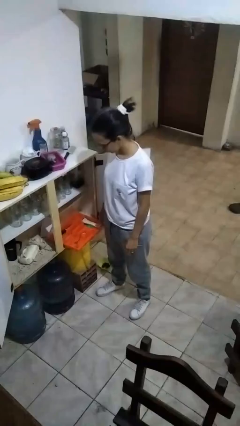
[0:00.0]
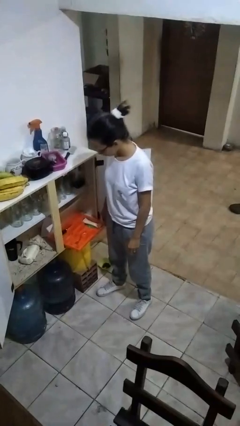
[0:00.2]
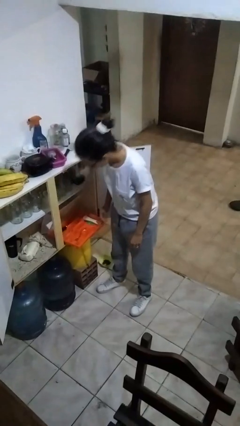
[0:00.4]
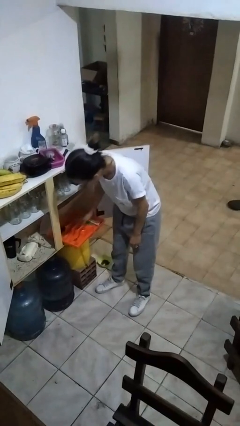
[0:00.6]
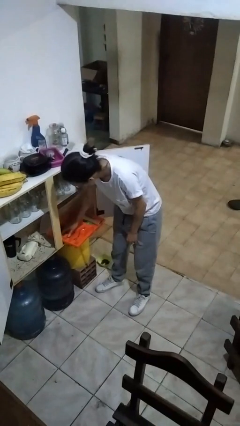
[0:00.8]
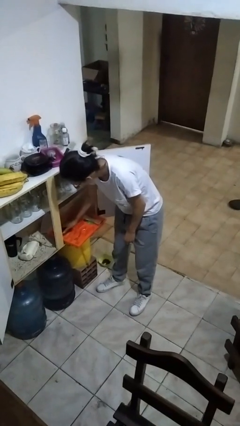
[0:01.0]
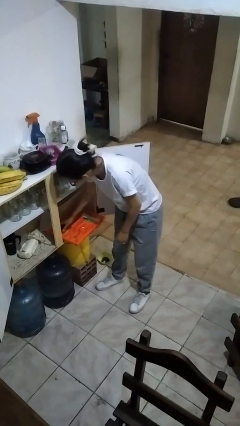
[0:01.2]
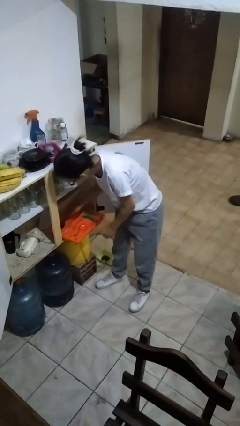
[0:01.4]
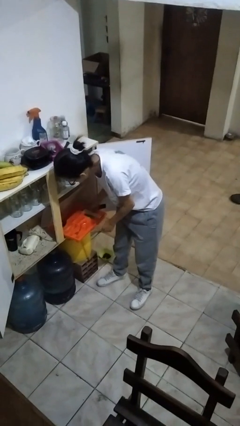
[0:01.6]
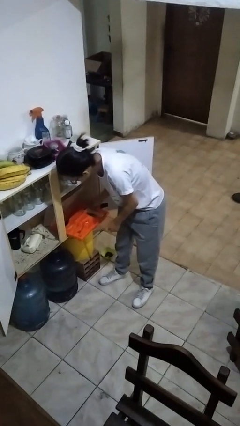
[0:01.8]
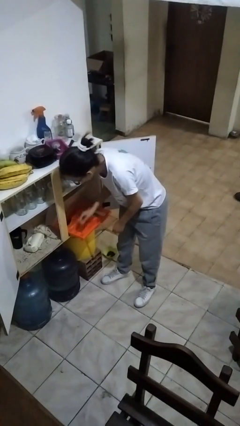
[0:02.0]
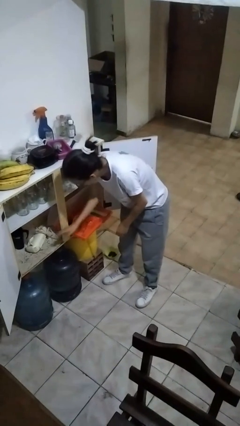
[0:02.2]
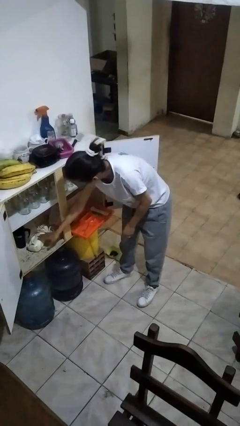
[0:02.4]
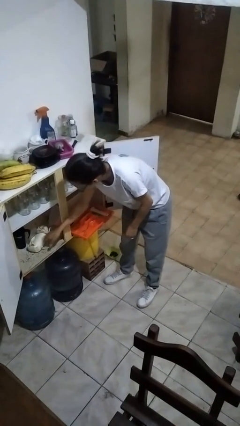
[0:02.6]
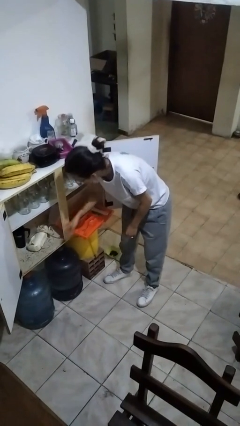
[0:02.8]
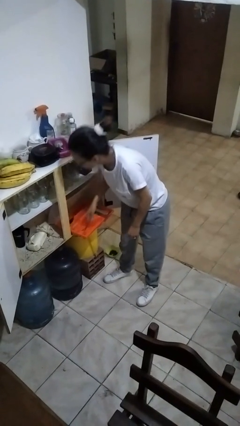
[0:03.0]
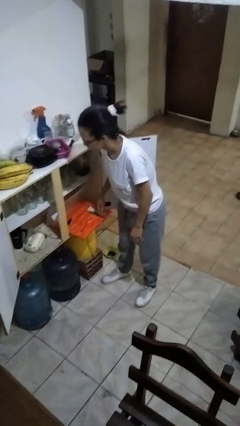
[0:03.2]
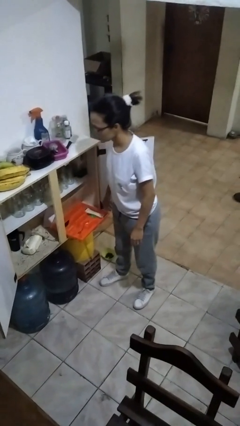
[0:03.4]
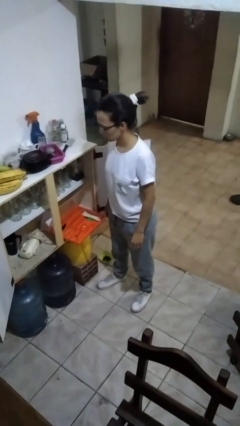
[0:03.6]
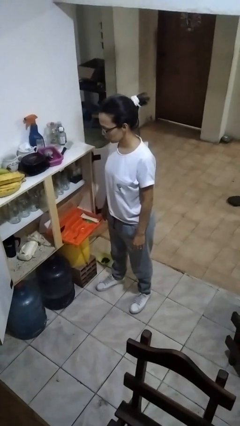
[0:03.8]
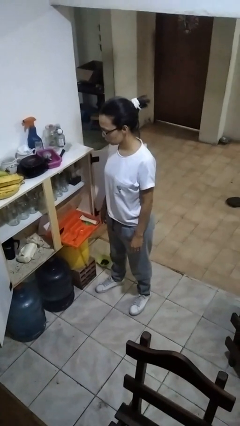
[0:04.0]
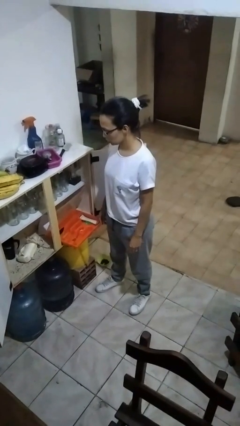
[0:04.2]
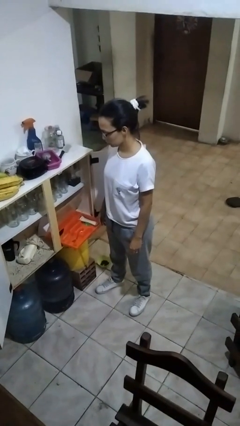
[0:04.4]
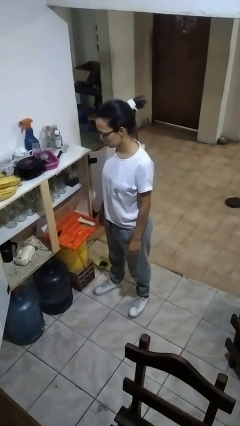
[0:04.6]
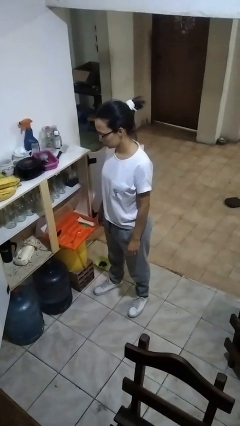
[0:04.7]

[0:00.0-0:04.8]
person searches in kitchen drawer

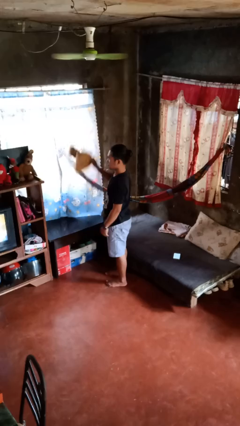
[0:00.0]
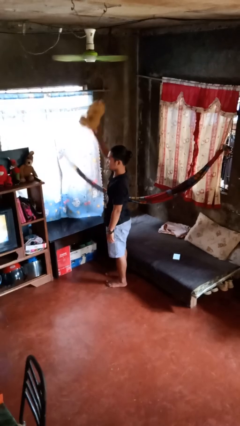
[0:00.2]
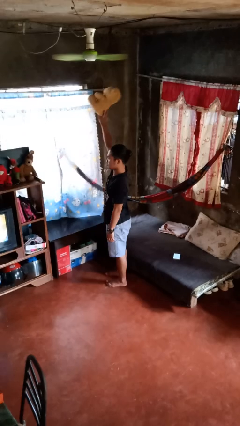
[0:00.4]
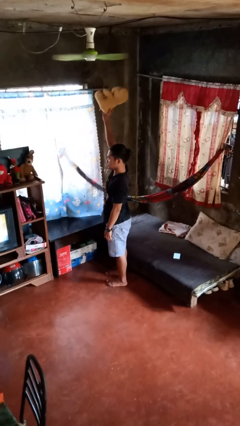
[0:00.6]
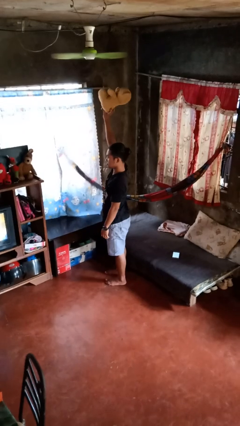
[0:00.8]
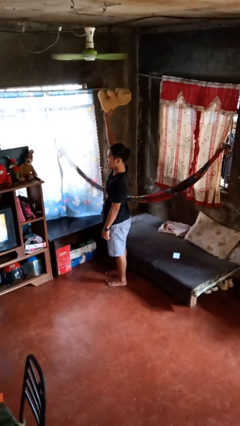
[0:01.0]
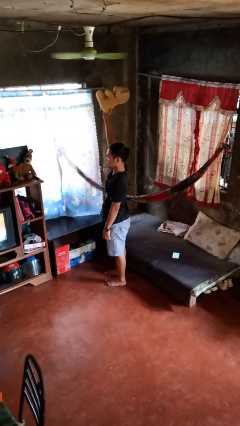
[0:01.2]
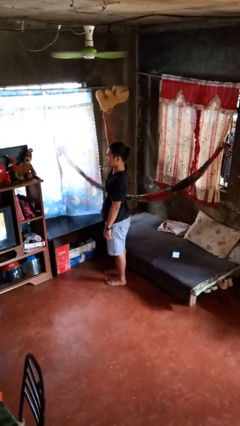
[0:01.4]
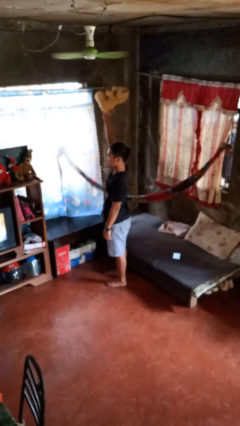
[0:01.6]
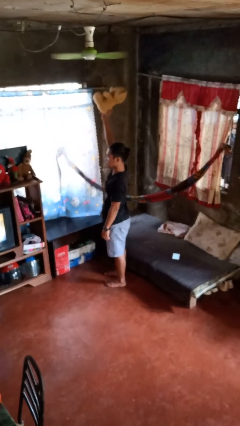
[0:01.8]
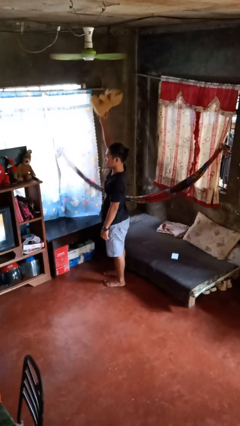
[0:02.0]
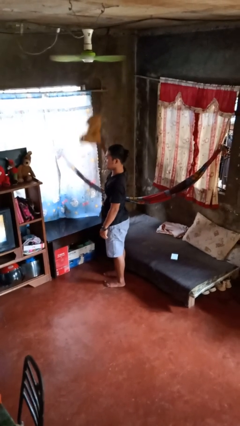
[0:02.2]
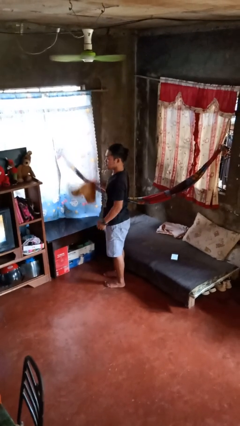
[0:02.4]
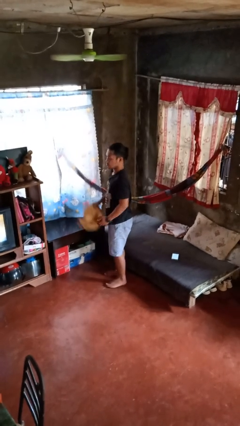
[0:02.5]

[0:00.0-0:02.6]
person holds object above head

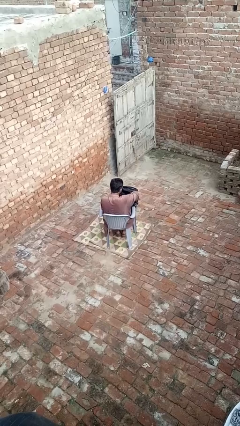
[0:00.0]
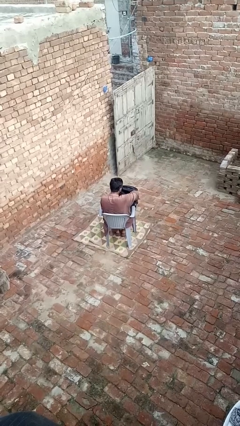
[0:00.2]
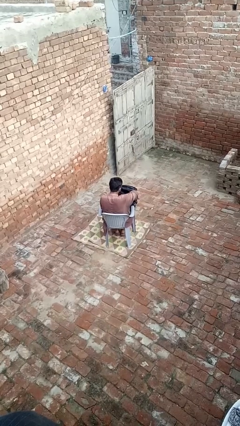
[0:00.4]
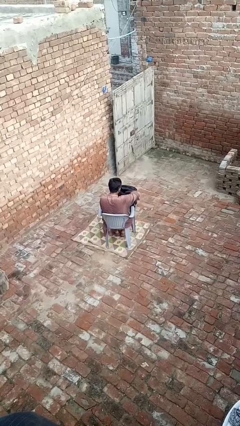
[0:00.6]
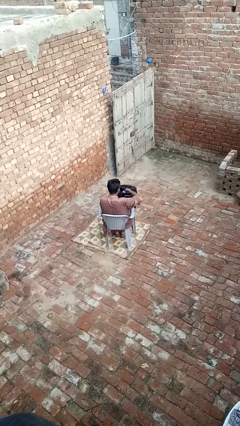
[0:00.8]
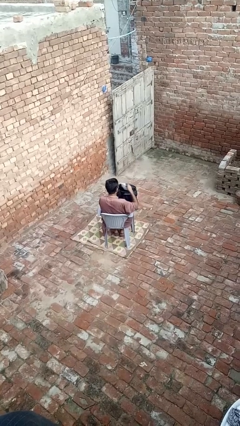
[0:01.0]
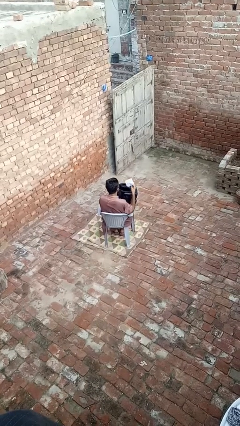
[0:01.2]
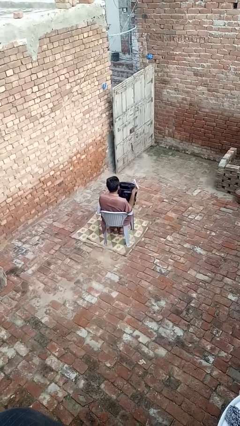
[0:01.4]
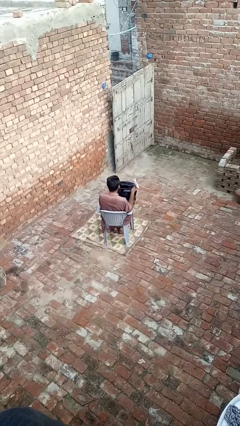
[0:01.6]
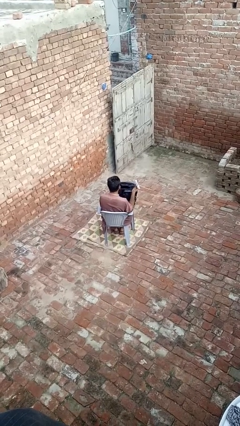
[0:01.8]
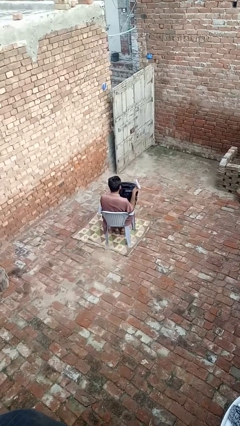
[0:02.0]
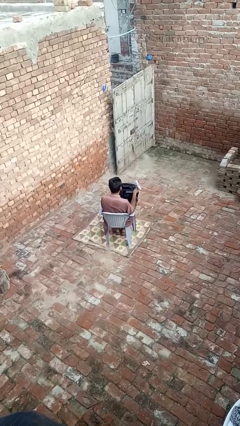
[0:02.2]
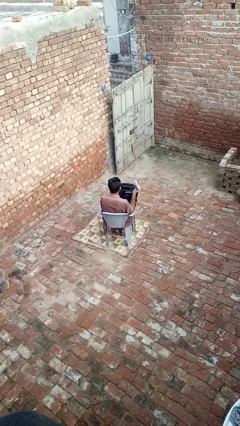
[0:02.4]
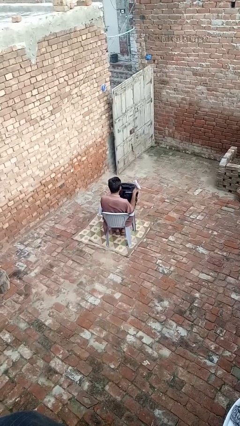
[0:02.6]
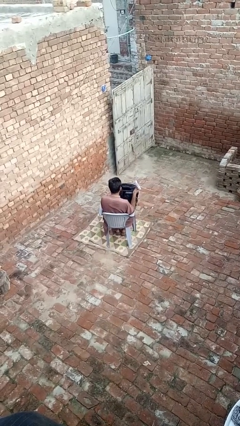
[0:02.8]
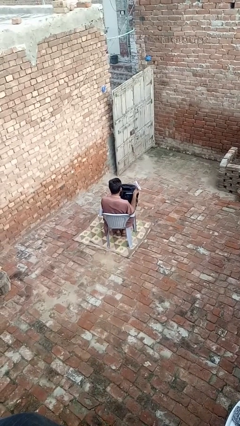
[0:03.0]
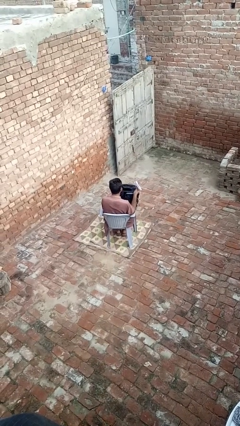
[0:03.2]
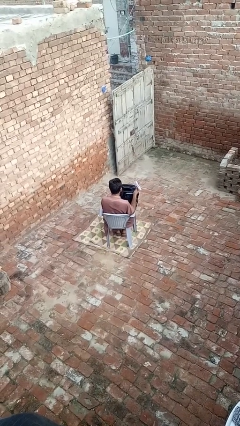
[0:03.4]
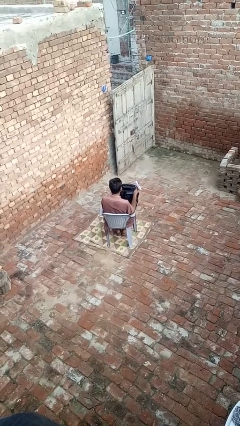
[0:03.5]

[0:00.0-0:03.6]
person takes object from backpack

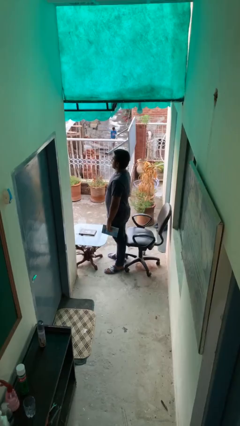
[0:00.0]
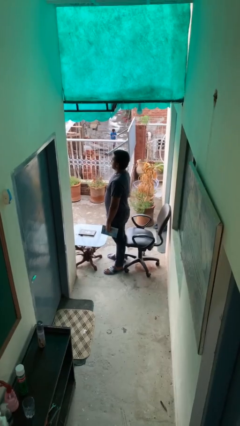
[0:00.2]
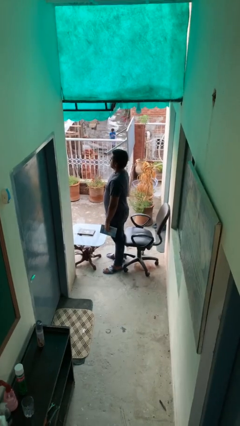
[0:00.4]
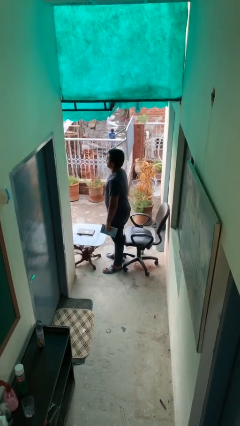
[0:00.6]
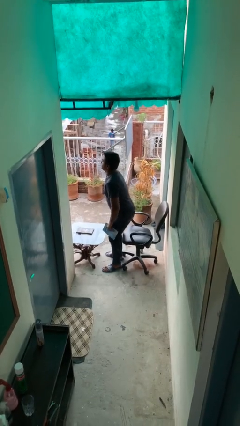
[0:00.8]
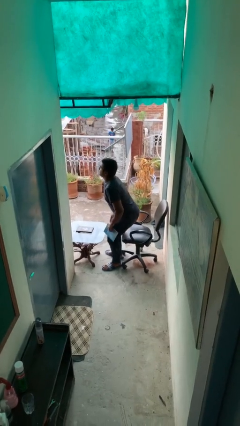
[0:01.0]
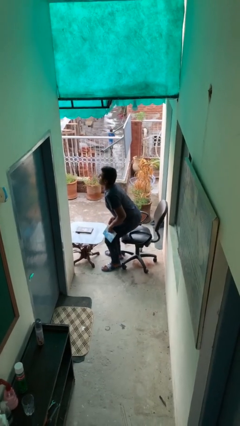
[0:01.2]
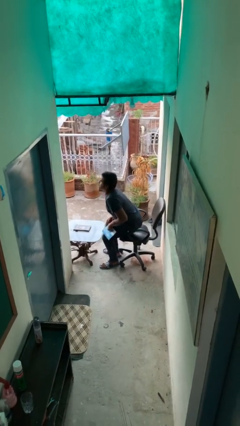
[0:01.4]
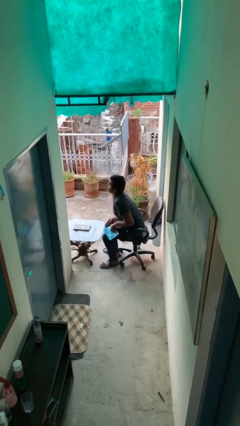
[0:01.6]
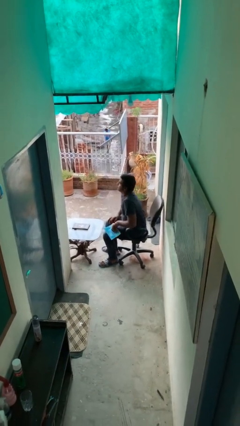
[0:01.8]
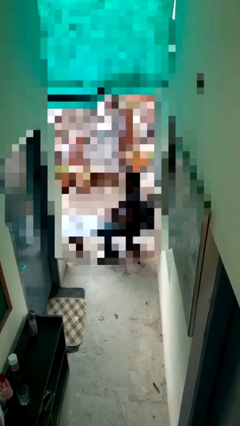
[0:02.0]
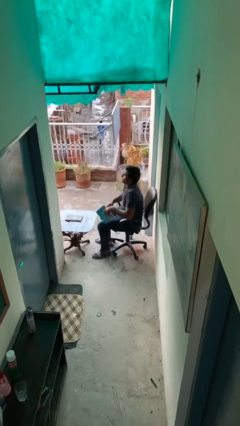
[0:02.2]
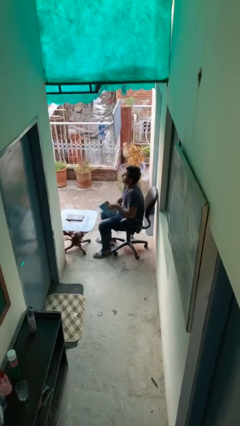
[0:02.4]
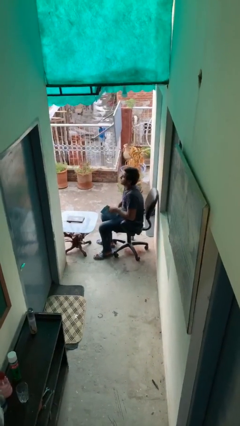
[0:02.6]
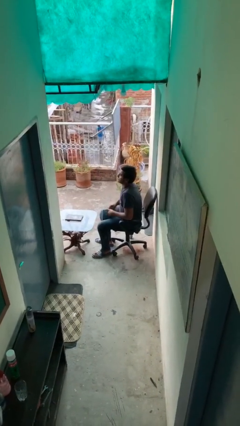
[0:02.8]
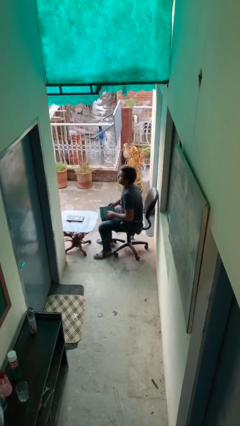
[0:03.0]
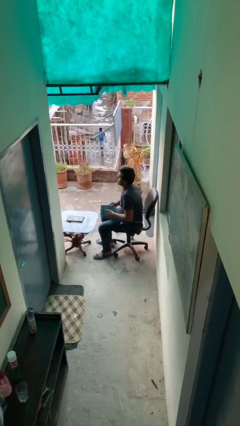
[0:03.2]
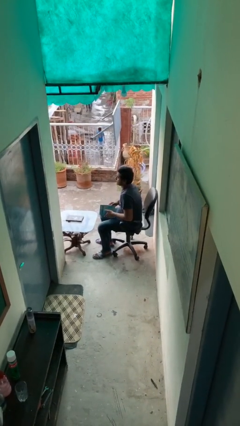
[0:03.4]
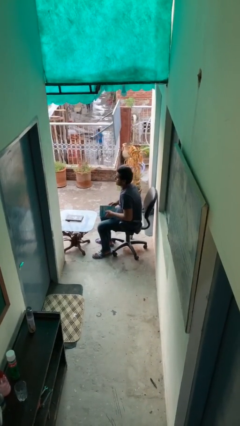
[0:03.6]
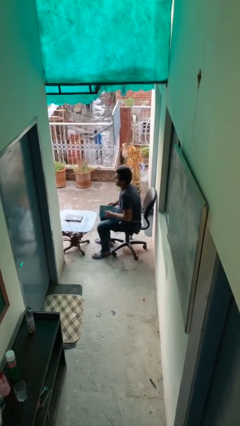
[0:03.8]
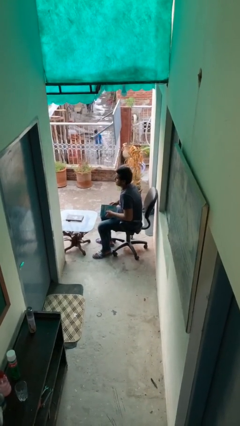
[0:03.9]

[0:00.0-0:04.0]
person sits down

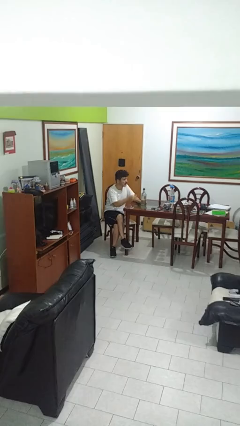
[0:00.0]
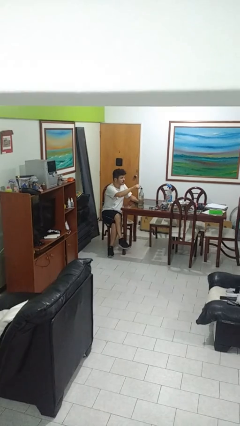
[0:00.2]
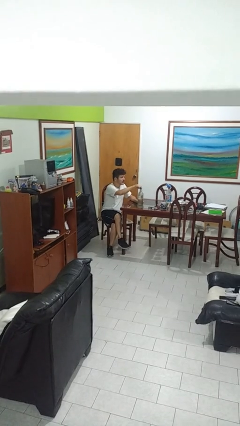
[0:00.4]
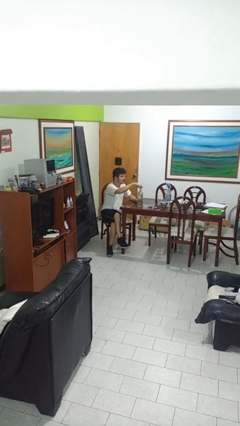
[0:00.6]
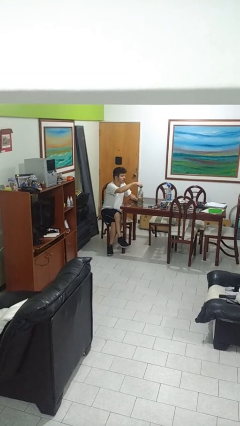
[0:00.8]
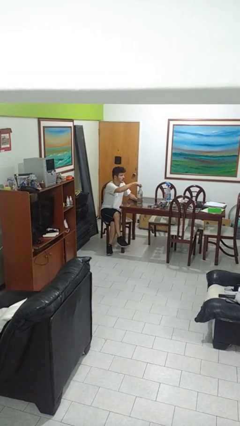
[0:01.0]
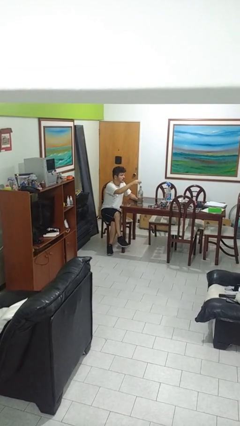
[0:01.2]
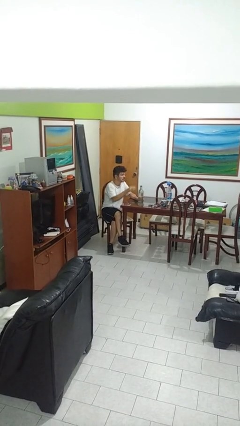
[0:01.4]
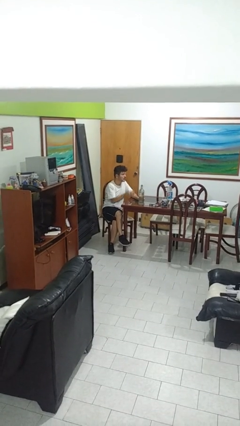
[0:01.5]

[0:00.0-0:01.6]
person unscrews lid from bottle

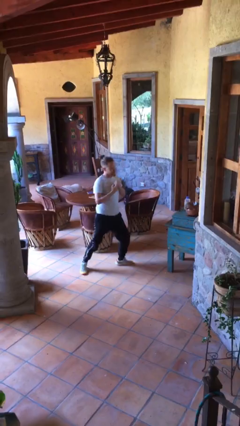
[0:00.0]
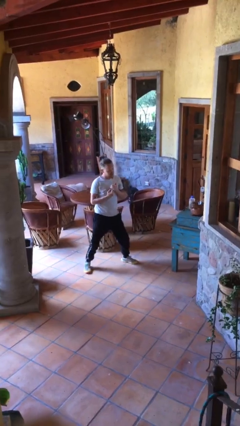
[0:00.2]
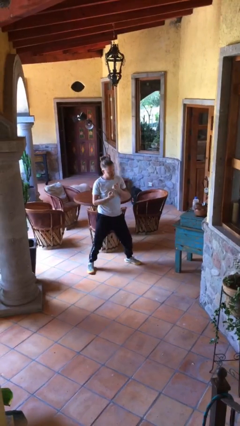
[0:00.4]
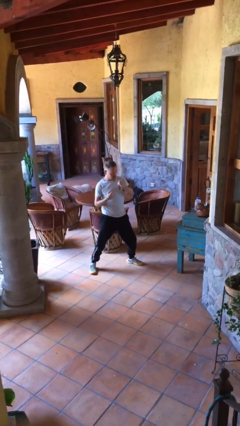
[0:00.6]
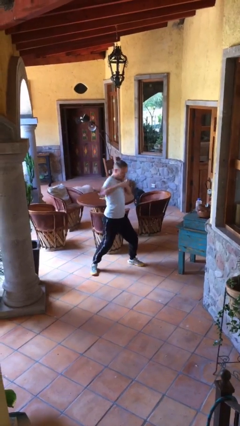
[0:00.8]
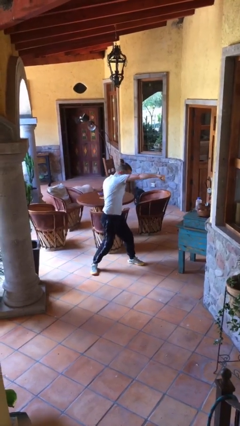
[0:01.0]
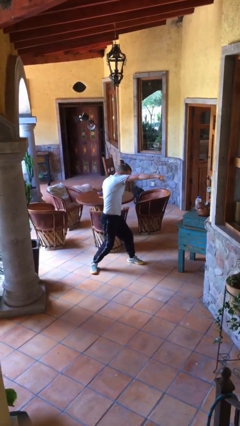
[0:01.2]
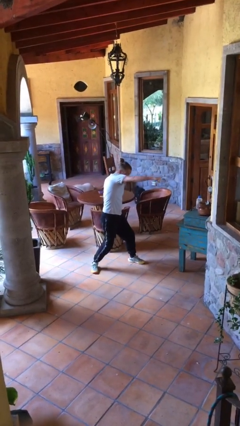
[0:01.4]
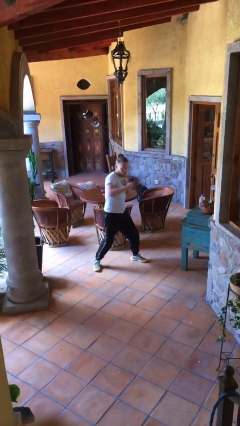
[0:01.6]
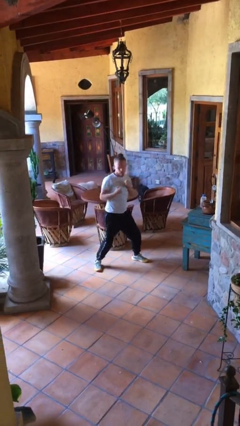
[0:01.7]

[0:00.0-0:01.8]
person karate chop
